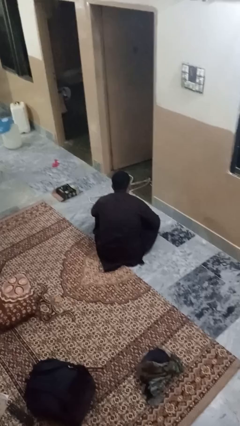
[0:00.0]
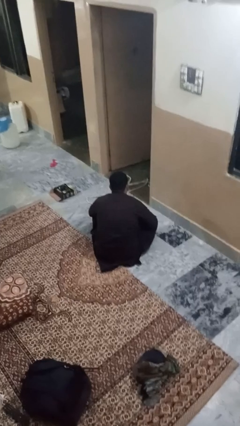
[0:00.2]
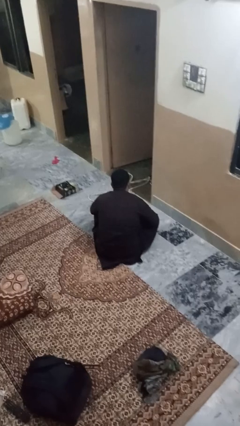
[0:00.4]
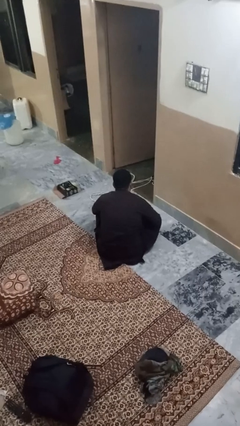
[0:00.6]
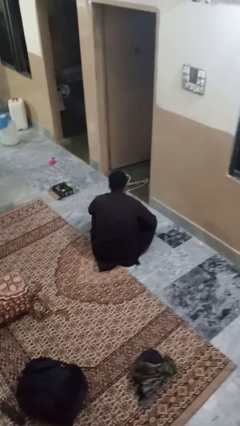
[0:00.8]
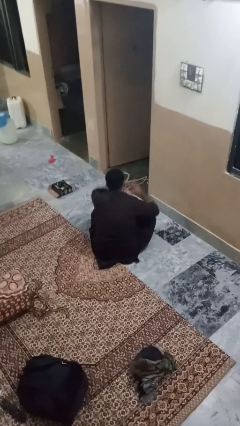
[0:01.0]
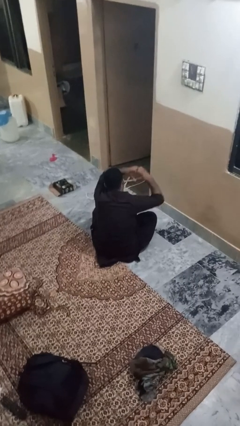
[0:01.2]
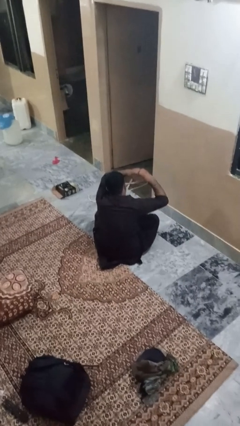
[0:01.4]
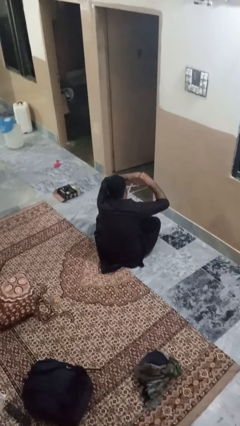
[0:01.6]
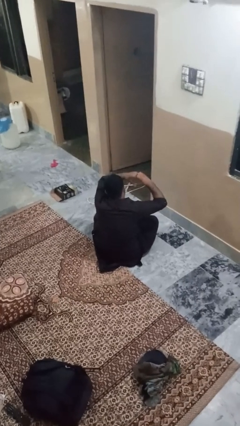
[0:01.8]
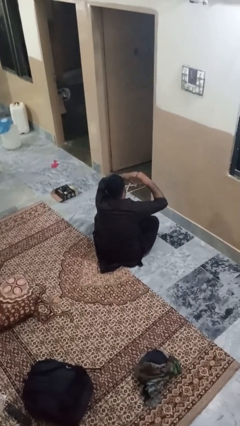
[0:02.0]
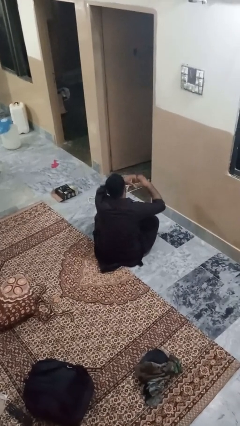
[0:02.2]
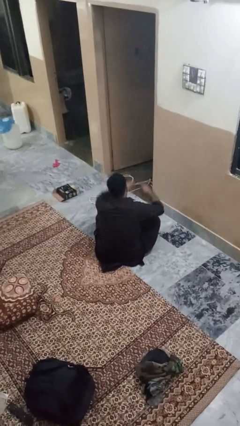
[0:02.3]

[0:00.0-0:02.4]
person gestures heart

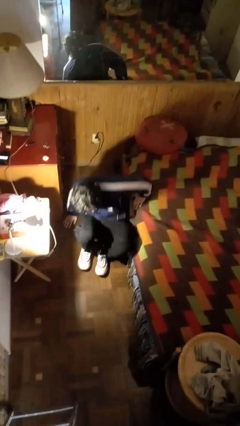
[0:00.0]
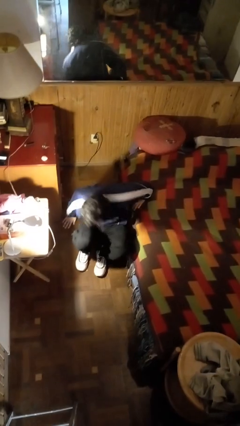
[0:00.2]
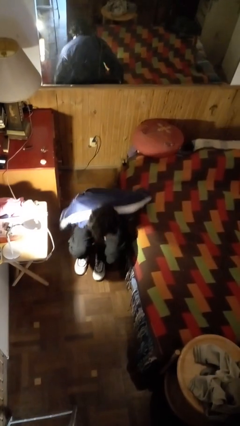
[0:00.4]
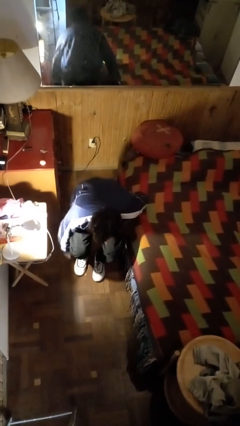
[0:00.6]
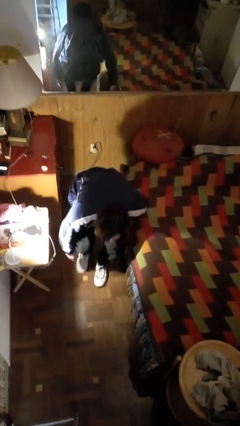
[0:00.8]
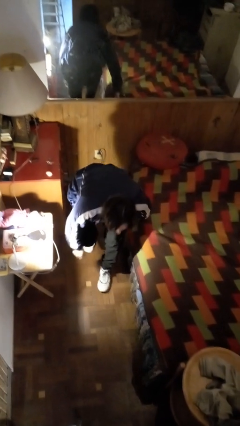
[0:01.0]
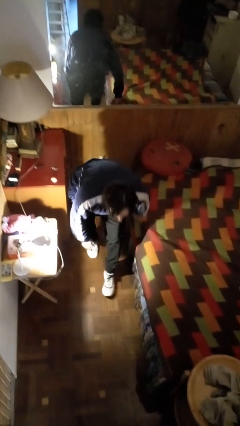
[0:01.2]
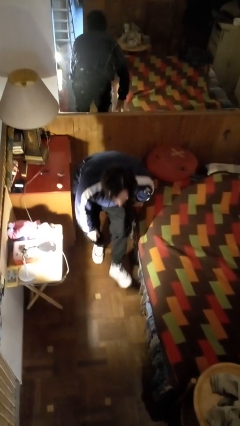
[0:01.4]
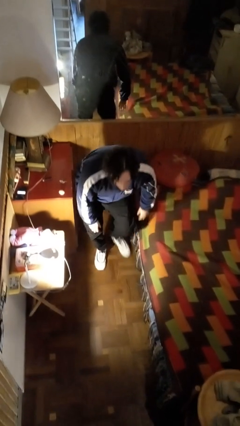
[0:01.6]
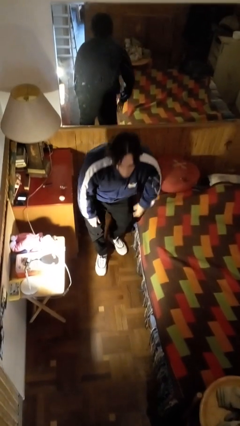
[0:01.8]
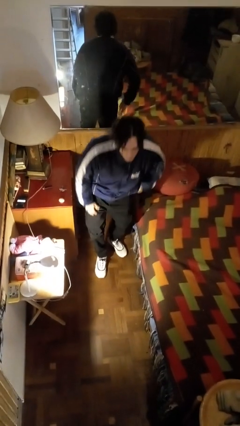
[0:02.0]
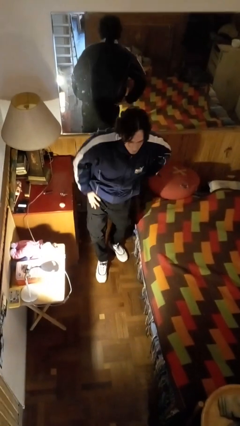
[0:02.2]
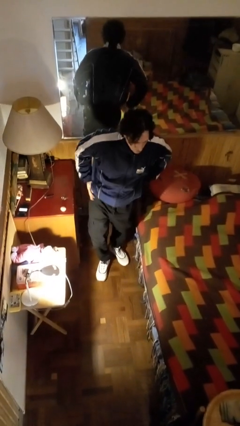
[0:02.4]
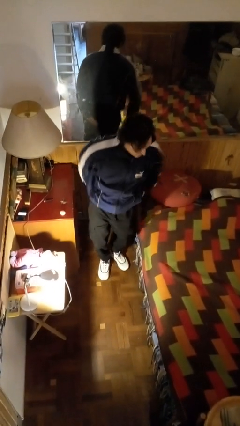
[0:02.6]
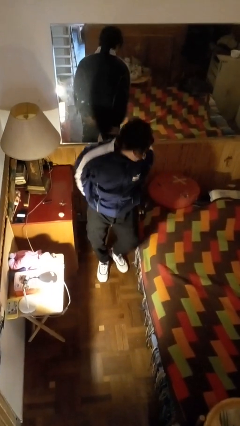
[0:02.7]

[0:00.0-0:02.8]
person stands up from floor

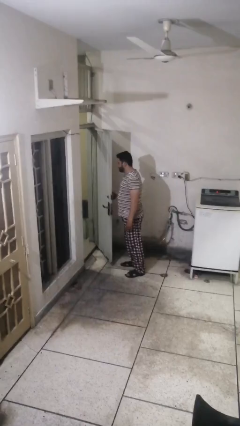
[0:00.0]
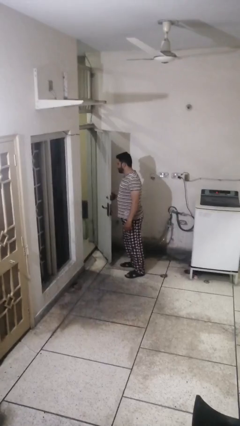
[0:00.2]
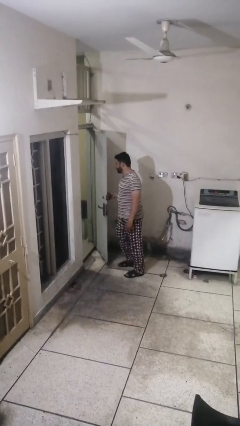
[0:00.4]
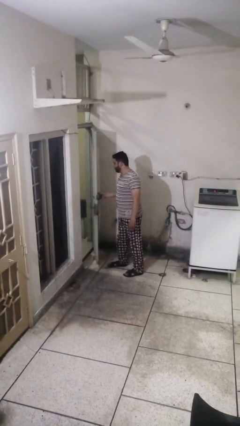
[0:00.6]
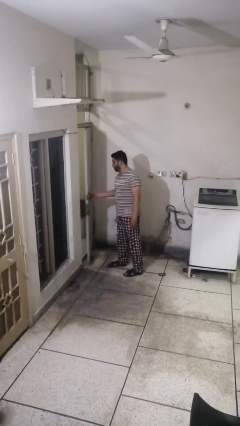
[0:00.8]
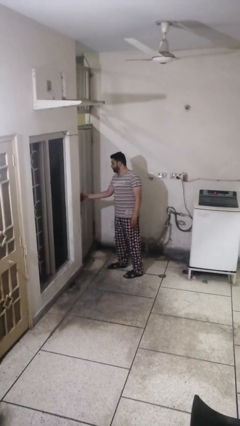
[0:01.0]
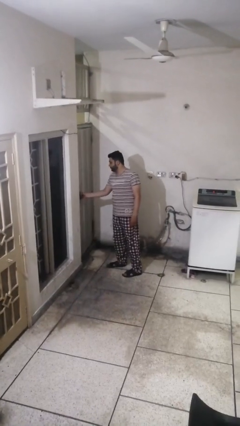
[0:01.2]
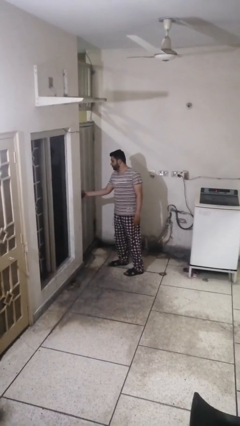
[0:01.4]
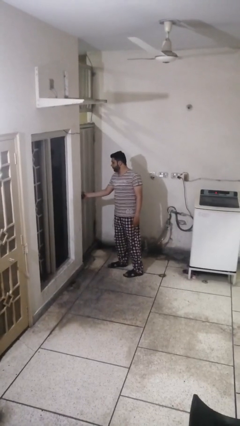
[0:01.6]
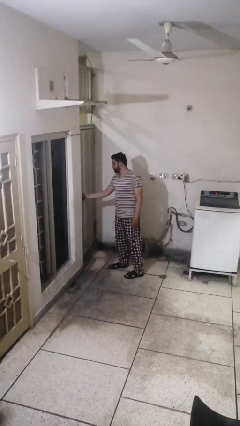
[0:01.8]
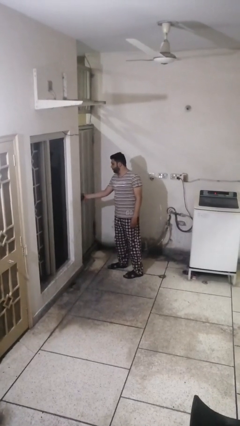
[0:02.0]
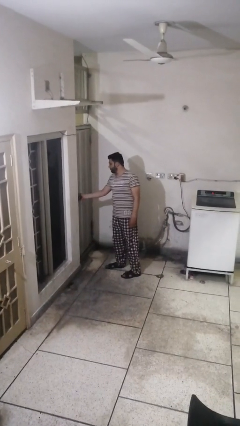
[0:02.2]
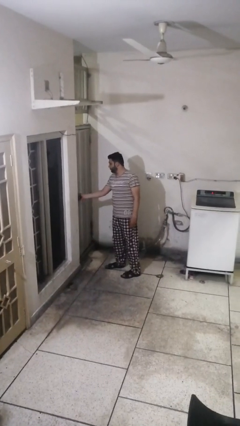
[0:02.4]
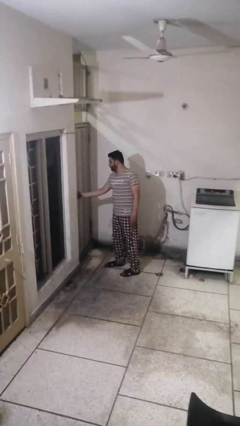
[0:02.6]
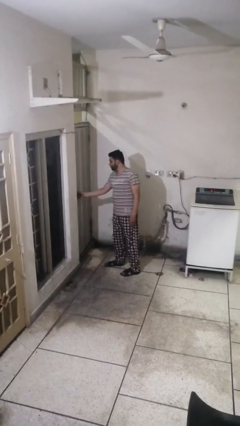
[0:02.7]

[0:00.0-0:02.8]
person closes facility door

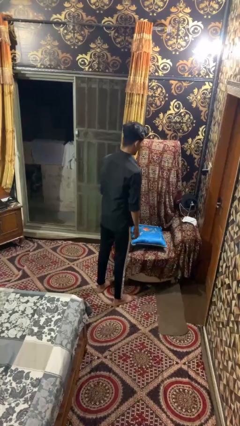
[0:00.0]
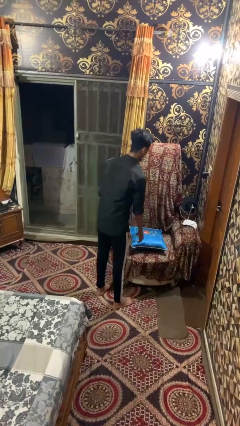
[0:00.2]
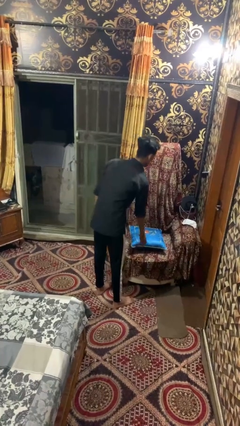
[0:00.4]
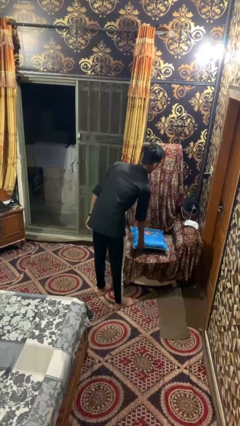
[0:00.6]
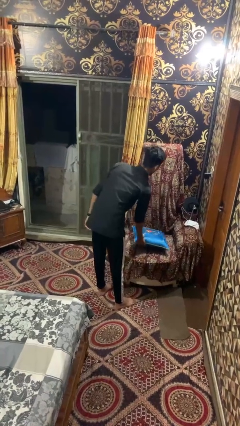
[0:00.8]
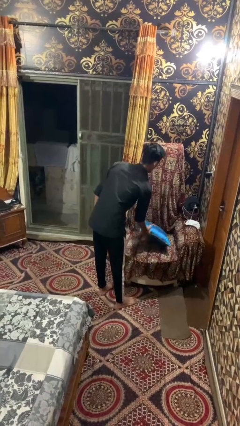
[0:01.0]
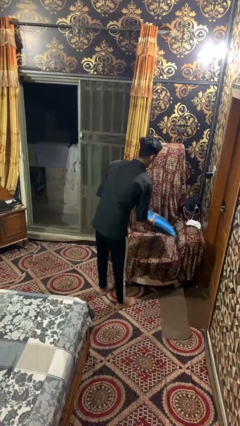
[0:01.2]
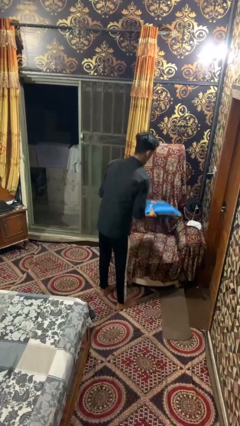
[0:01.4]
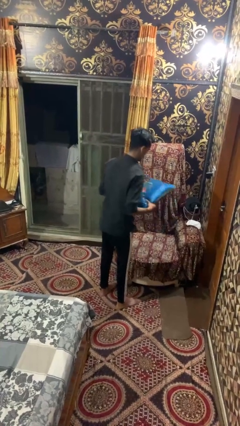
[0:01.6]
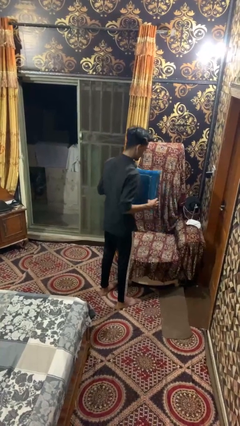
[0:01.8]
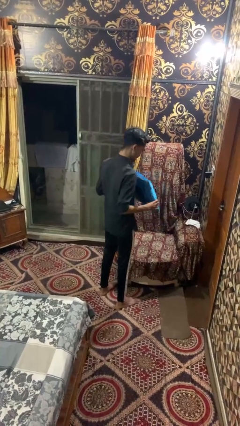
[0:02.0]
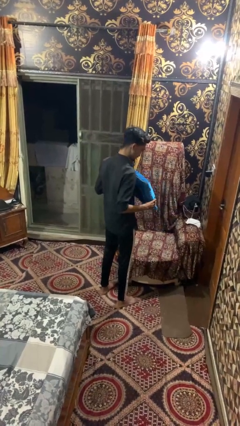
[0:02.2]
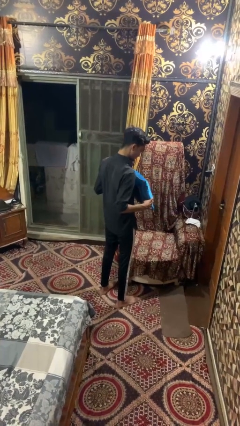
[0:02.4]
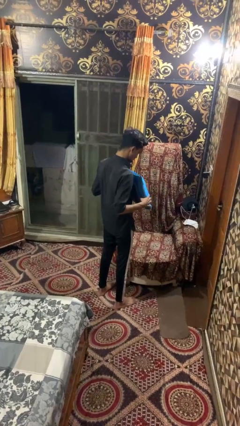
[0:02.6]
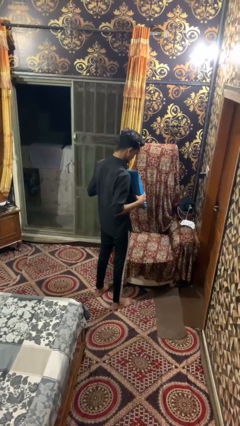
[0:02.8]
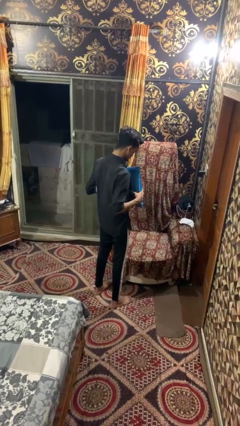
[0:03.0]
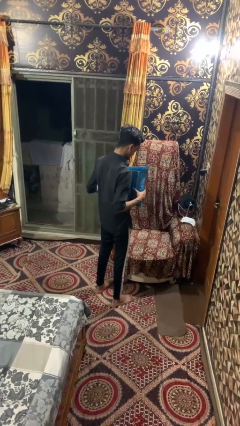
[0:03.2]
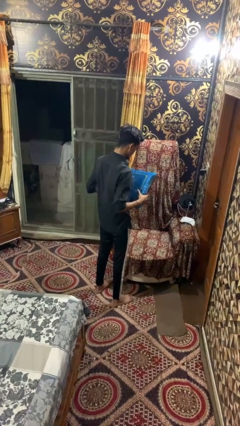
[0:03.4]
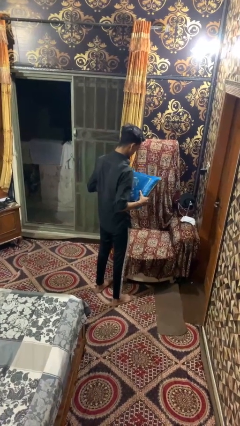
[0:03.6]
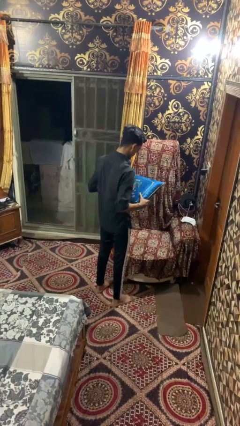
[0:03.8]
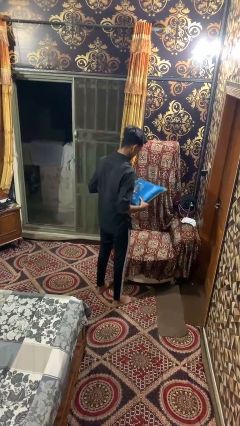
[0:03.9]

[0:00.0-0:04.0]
person picks up object from couch

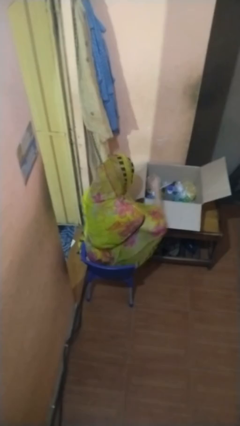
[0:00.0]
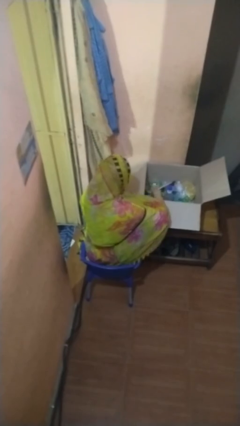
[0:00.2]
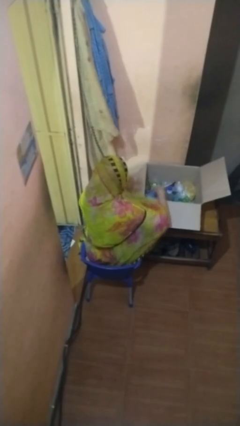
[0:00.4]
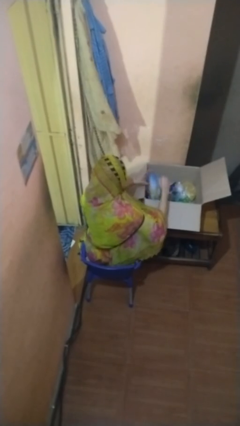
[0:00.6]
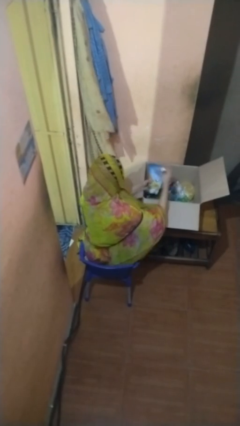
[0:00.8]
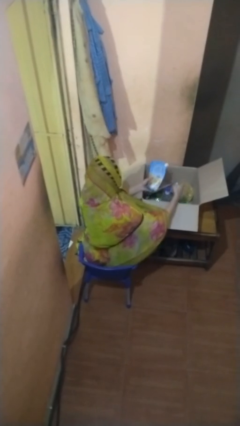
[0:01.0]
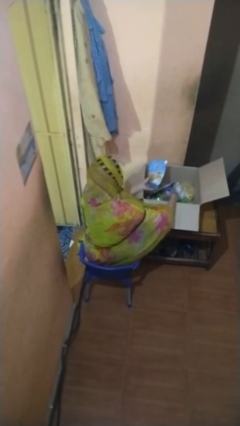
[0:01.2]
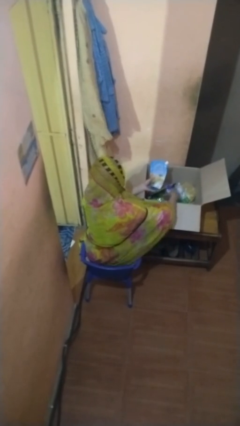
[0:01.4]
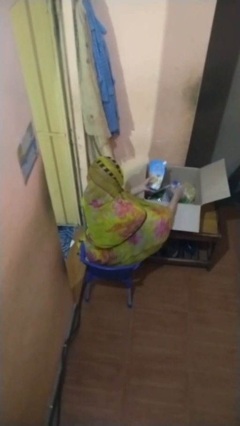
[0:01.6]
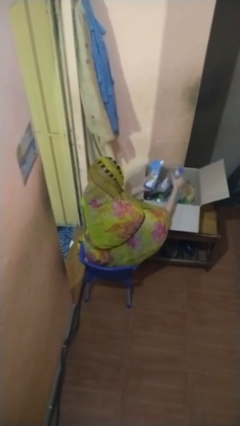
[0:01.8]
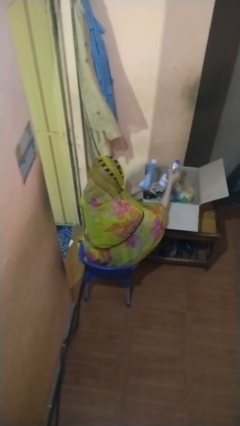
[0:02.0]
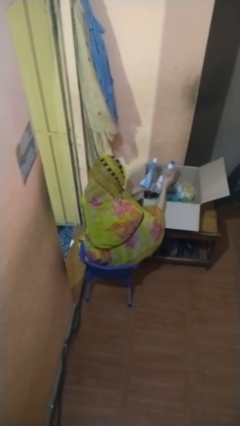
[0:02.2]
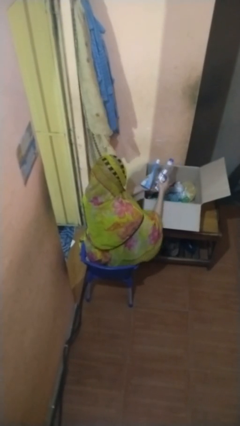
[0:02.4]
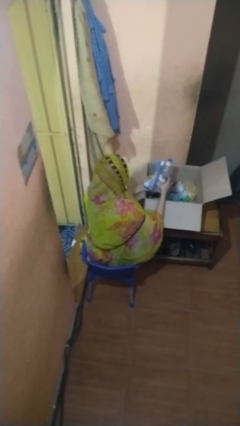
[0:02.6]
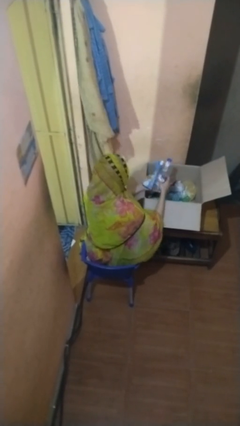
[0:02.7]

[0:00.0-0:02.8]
person takes object from box

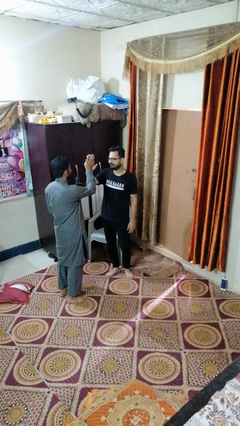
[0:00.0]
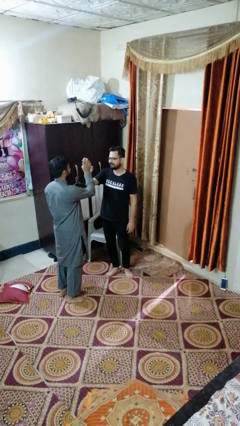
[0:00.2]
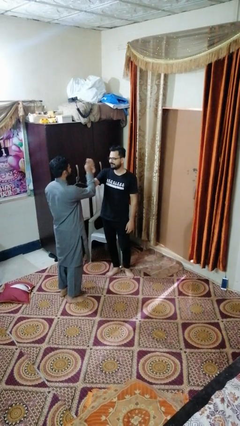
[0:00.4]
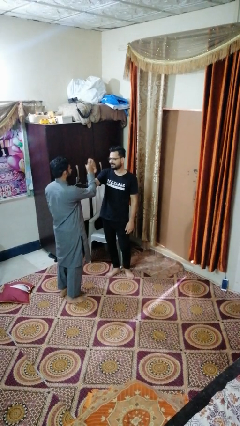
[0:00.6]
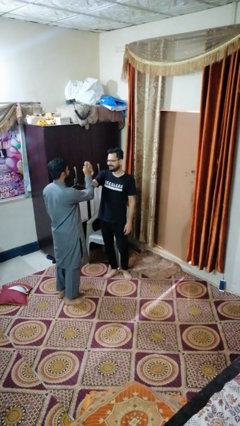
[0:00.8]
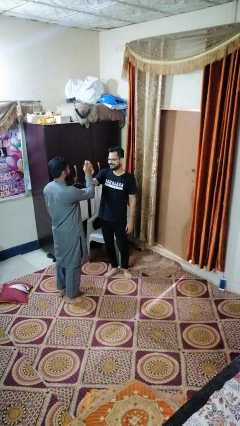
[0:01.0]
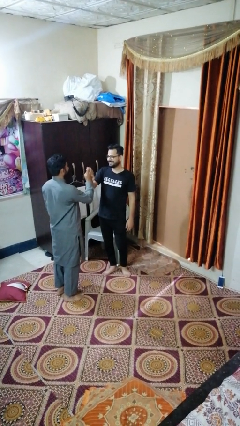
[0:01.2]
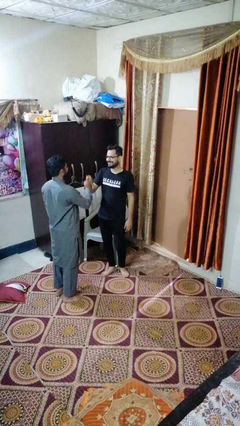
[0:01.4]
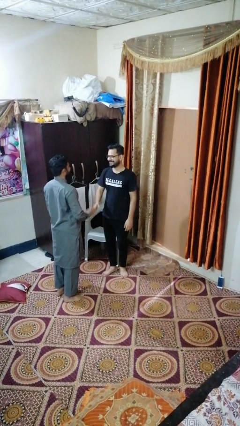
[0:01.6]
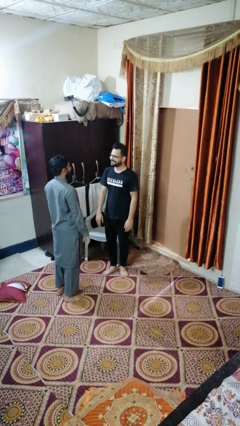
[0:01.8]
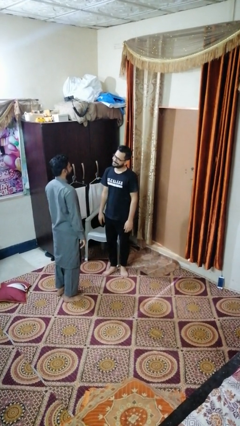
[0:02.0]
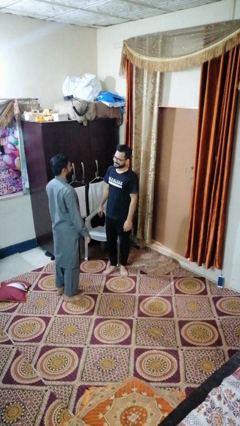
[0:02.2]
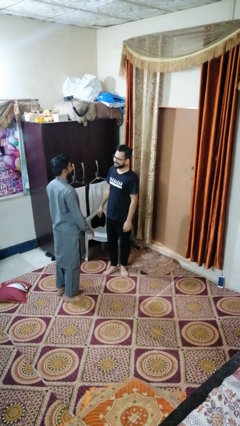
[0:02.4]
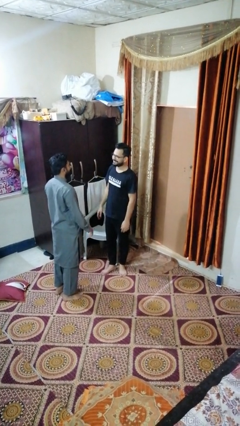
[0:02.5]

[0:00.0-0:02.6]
person highfives hand
